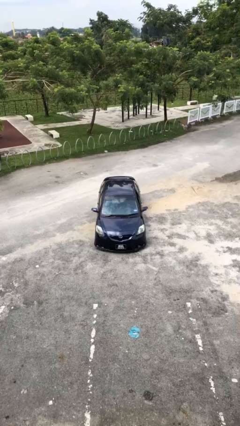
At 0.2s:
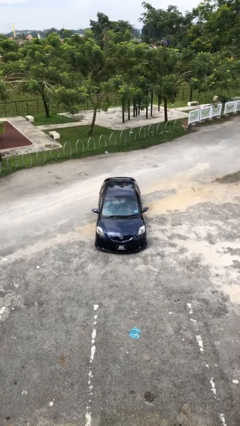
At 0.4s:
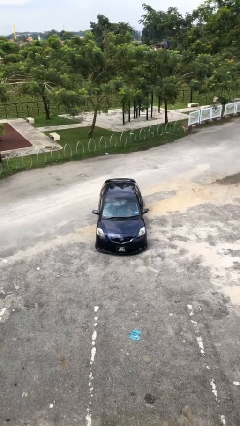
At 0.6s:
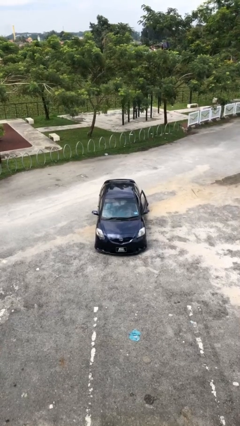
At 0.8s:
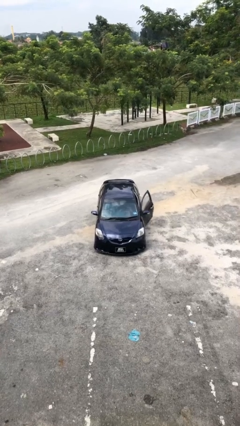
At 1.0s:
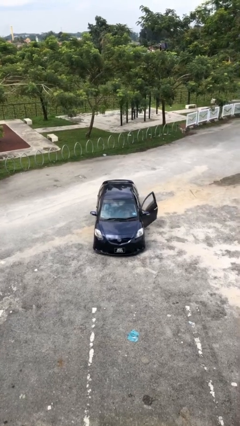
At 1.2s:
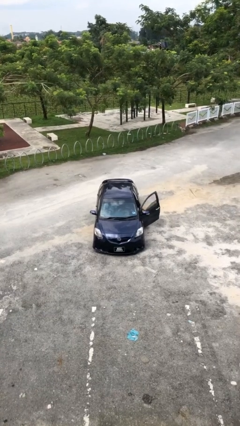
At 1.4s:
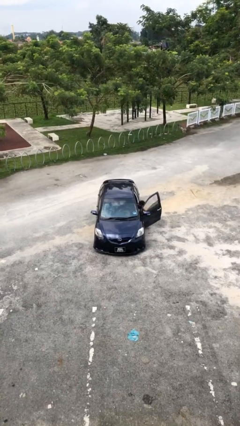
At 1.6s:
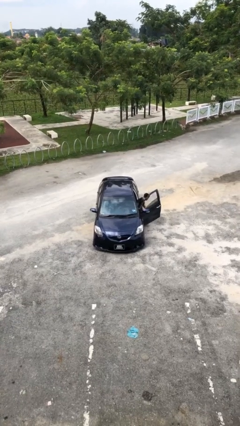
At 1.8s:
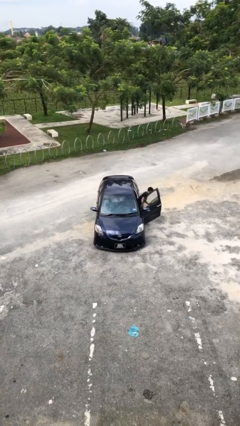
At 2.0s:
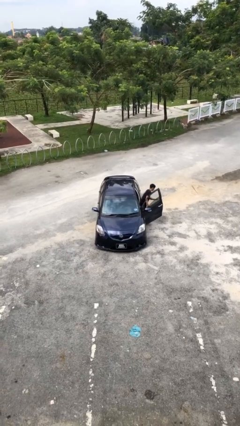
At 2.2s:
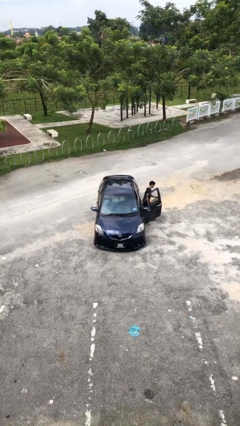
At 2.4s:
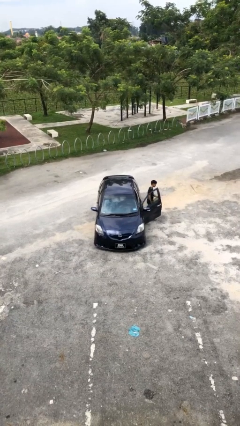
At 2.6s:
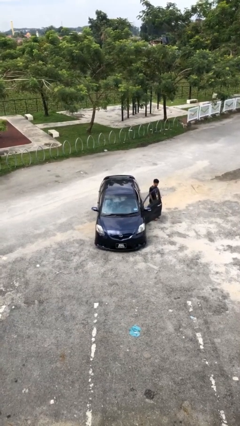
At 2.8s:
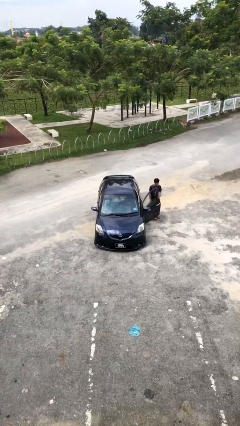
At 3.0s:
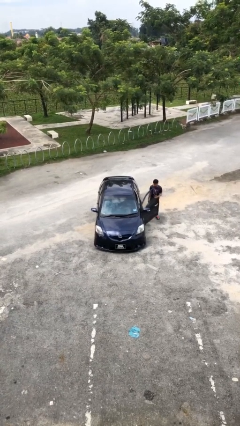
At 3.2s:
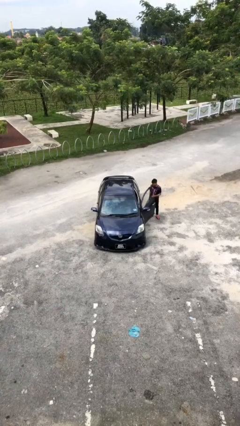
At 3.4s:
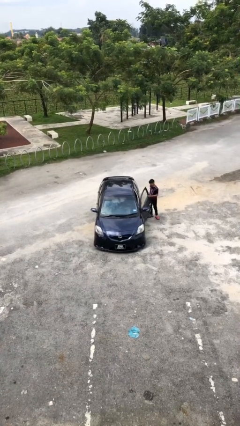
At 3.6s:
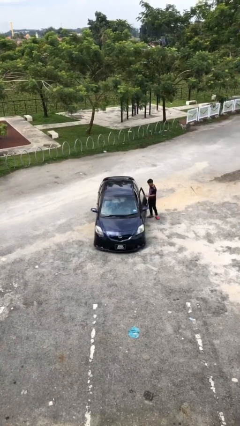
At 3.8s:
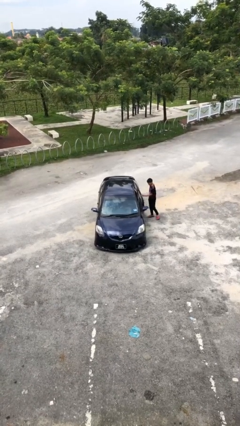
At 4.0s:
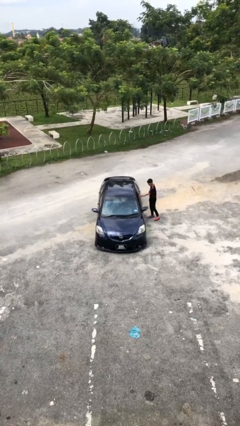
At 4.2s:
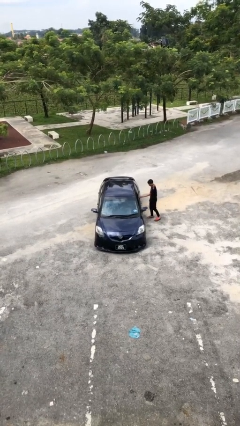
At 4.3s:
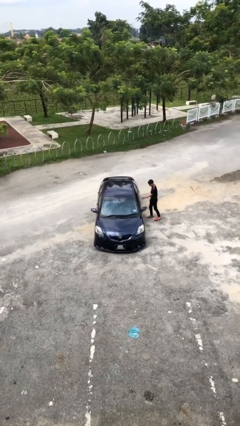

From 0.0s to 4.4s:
car drops off person

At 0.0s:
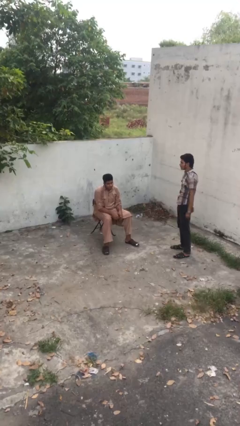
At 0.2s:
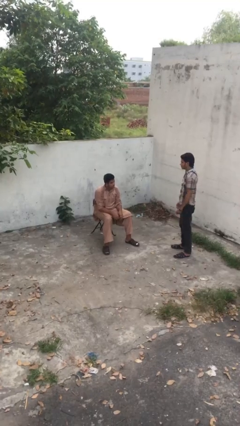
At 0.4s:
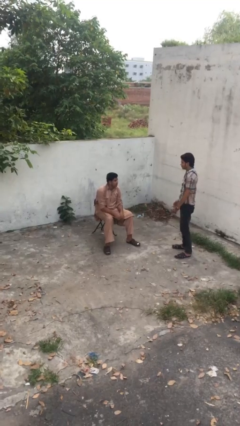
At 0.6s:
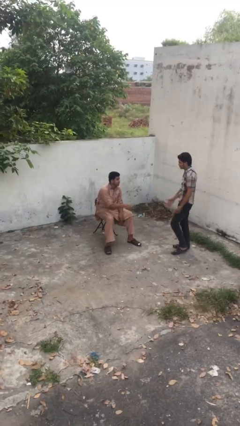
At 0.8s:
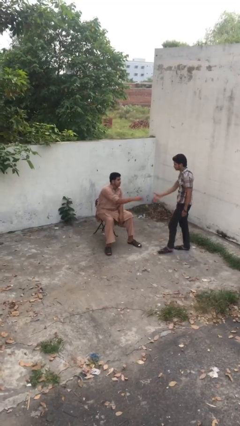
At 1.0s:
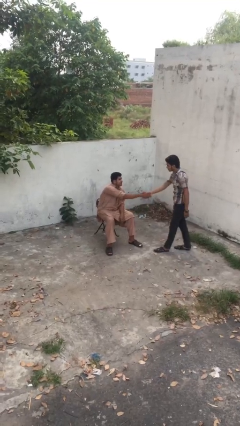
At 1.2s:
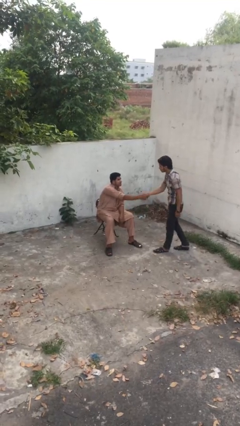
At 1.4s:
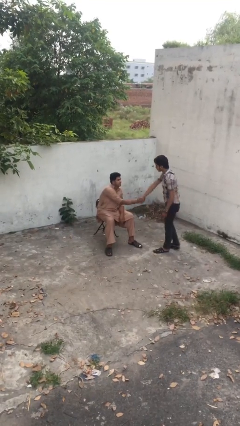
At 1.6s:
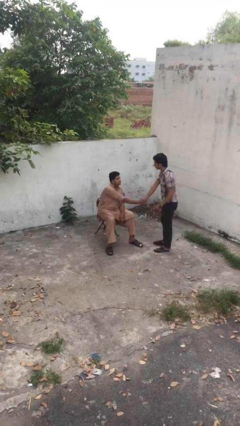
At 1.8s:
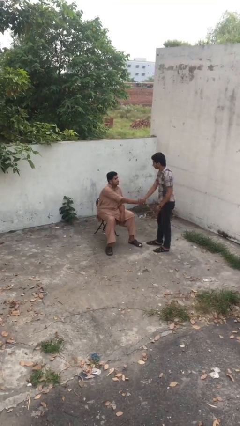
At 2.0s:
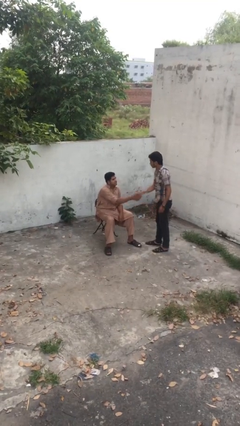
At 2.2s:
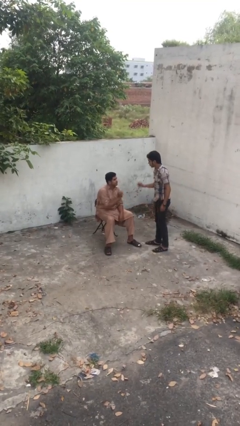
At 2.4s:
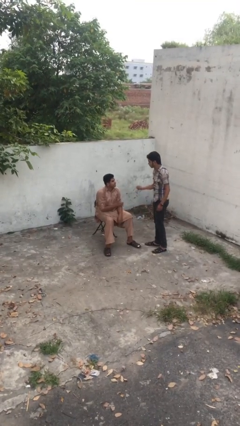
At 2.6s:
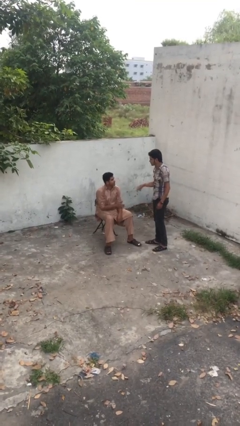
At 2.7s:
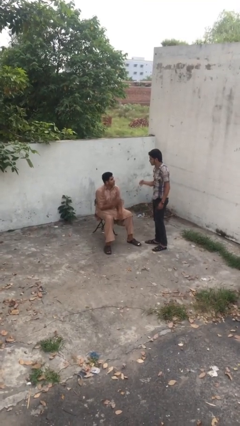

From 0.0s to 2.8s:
person shakes hand

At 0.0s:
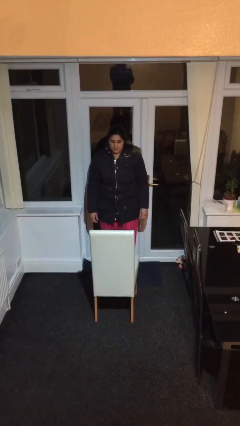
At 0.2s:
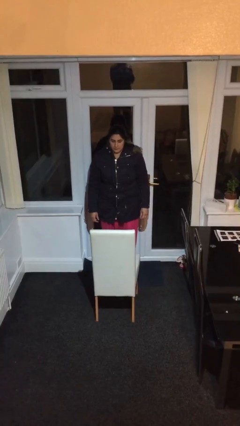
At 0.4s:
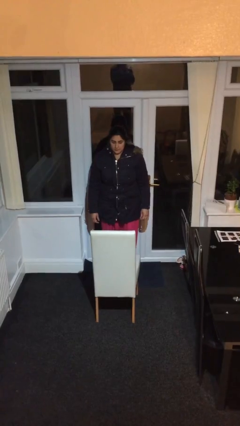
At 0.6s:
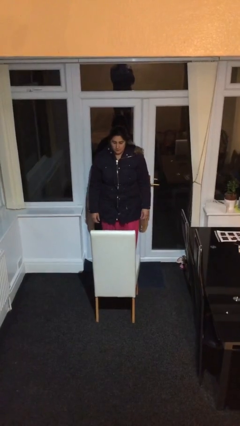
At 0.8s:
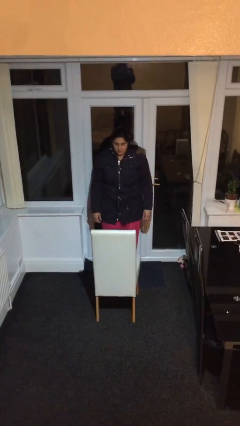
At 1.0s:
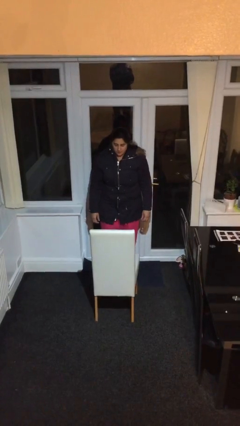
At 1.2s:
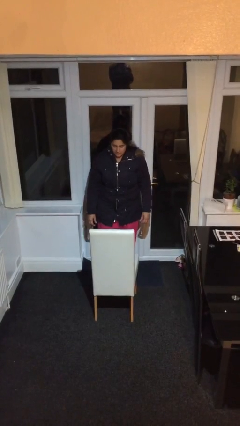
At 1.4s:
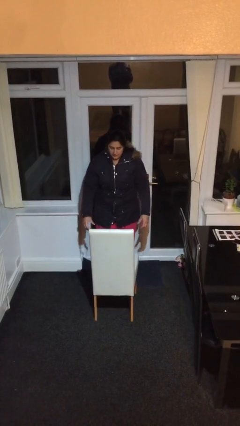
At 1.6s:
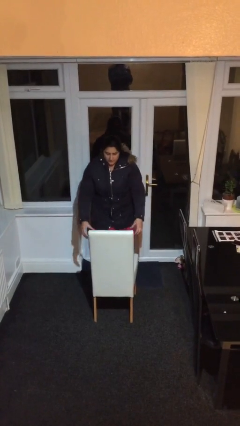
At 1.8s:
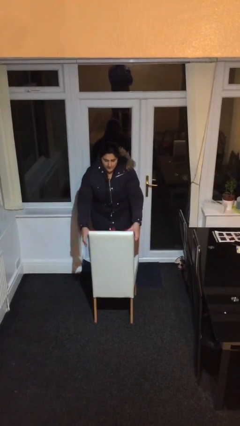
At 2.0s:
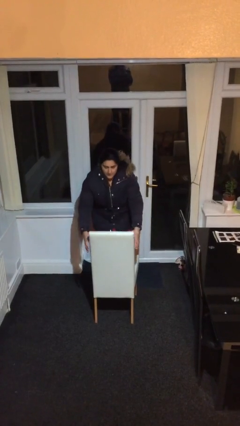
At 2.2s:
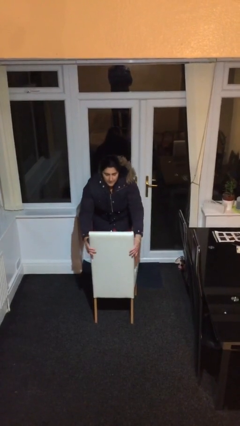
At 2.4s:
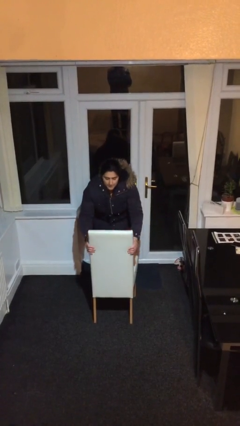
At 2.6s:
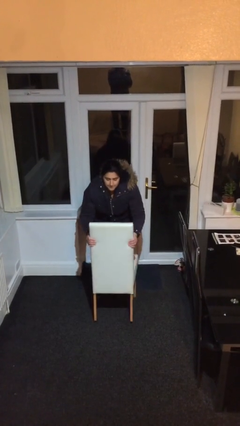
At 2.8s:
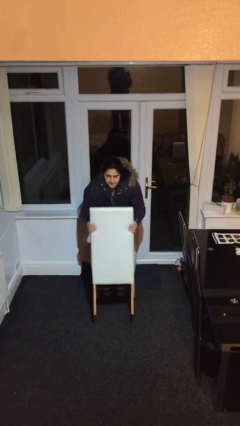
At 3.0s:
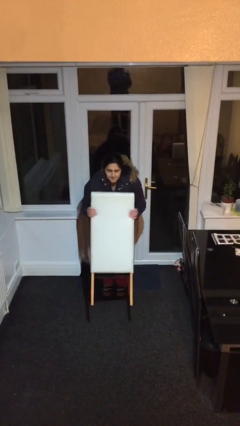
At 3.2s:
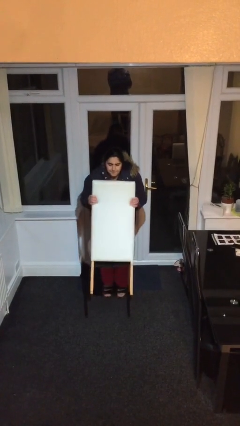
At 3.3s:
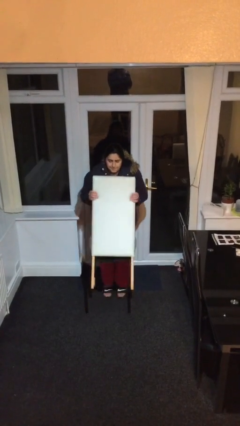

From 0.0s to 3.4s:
person picks up object from floor

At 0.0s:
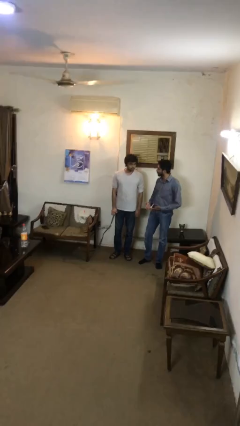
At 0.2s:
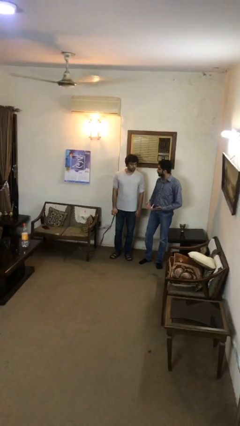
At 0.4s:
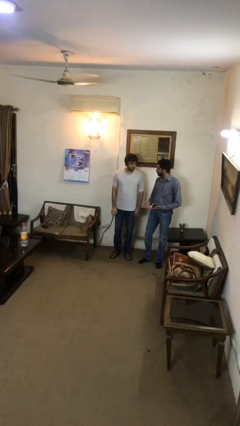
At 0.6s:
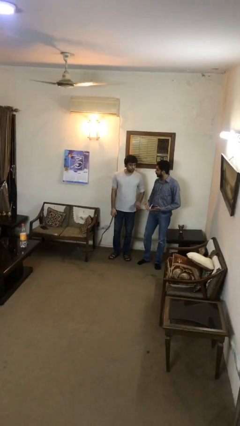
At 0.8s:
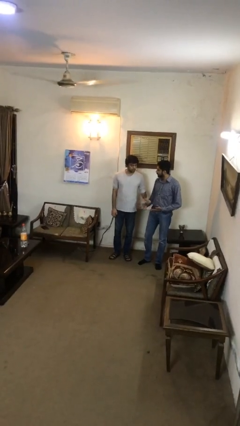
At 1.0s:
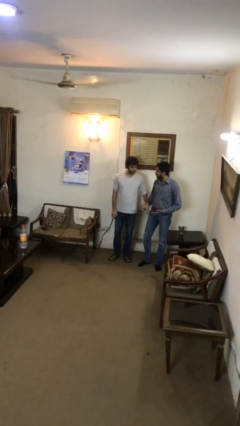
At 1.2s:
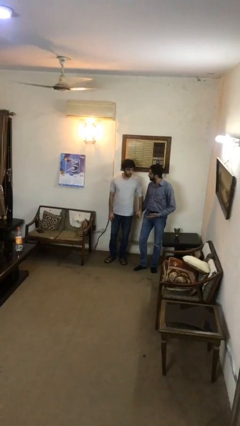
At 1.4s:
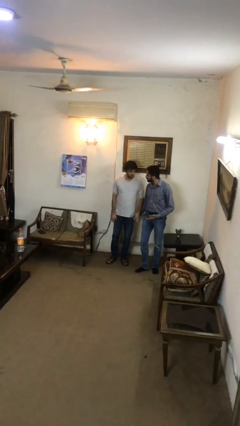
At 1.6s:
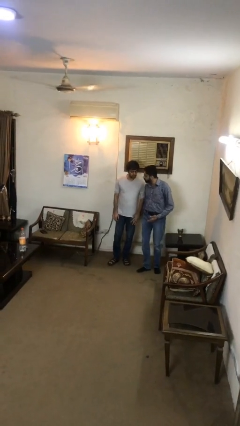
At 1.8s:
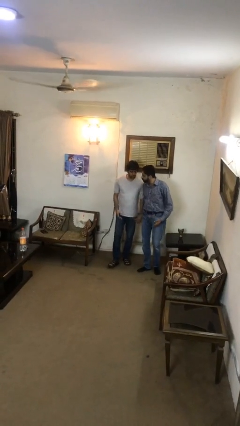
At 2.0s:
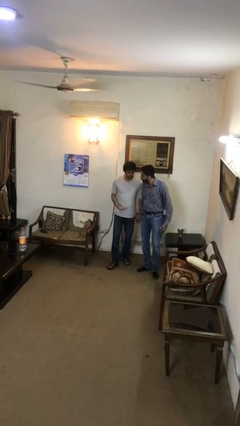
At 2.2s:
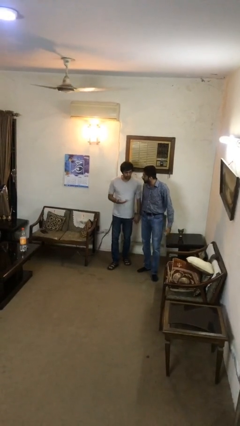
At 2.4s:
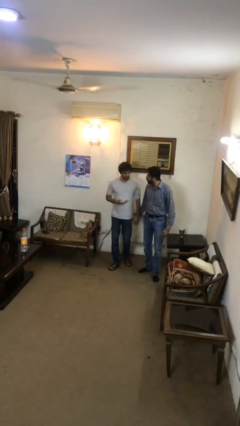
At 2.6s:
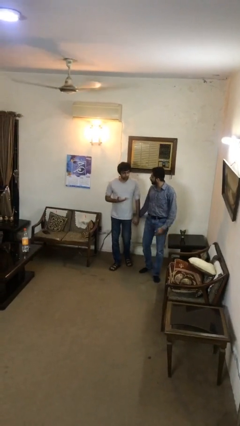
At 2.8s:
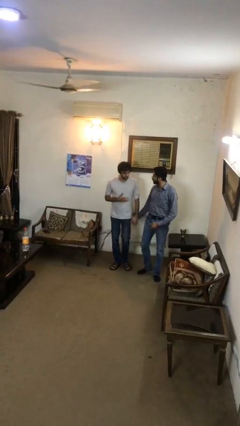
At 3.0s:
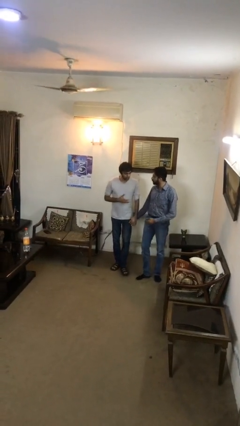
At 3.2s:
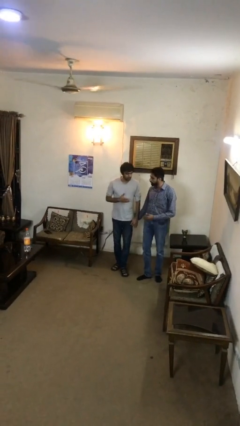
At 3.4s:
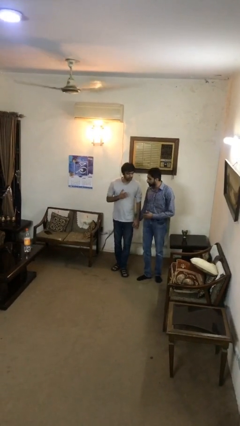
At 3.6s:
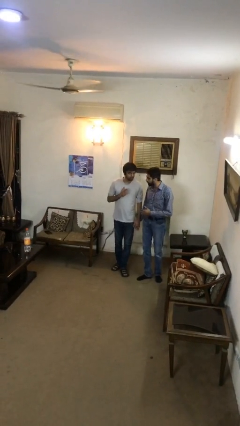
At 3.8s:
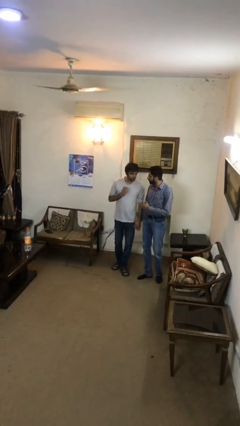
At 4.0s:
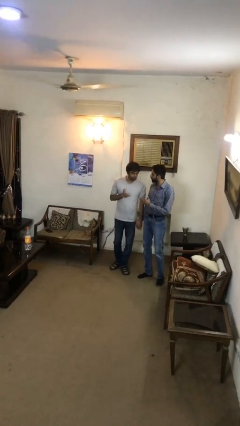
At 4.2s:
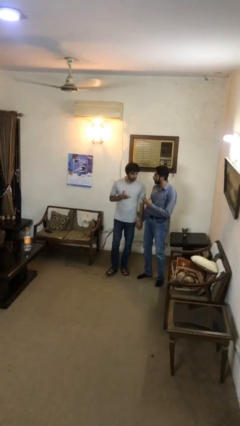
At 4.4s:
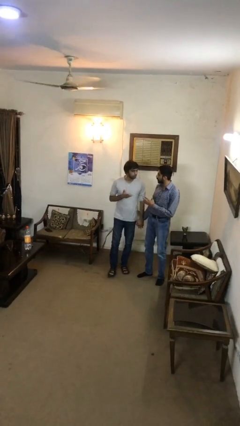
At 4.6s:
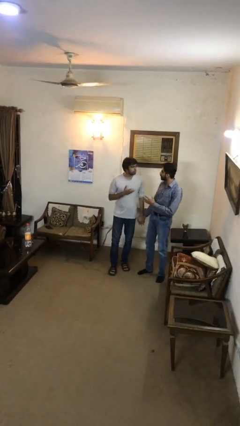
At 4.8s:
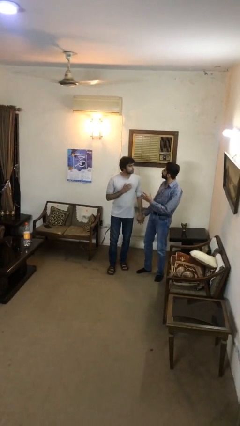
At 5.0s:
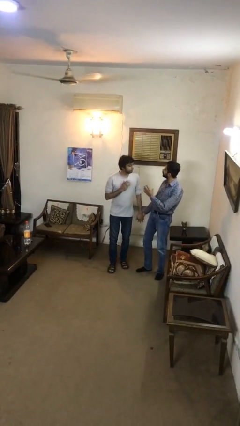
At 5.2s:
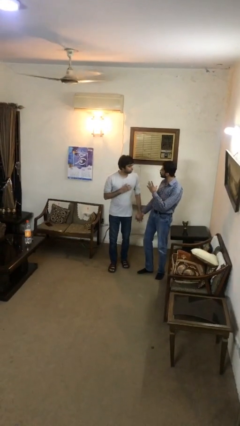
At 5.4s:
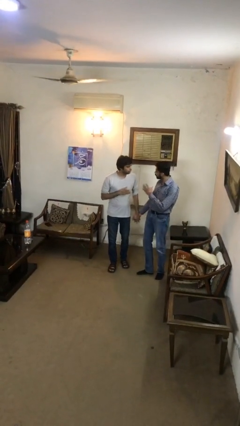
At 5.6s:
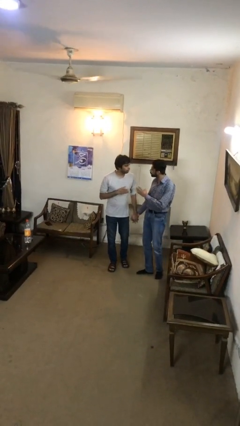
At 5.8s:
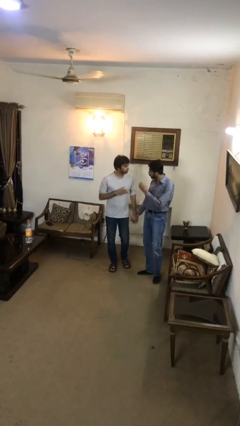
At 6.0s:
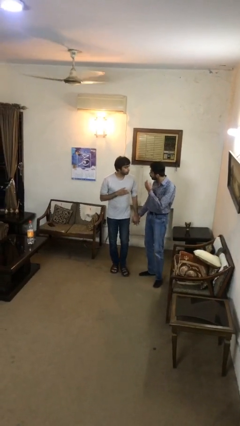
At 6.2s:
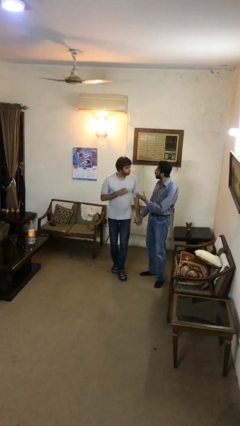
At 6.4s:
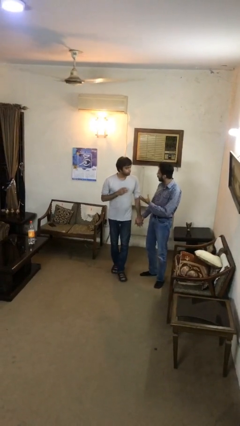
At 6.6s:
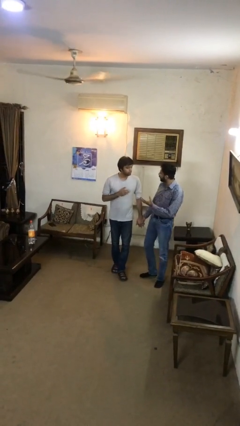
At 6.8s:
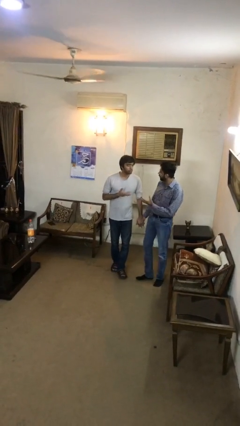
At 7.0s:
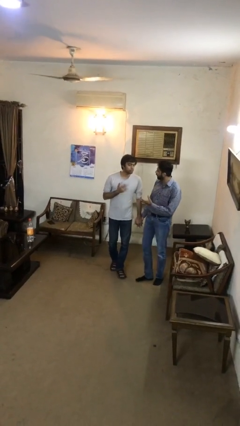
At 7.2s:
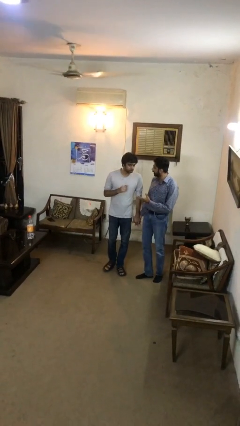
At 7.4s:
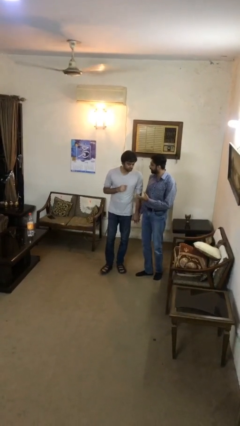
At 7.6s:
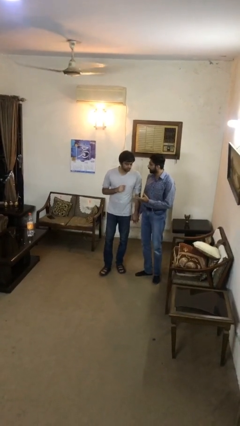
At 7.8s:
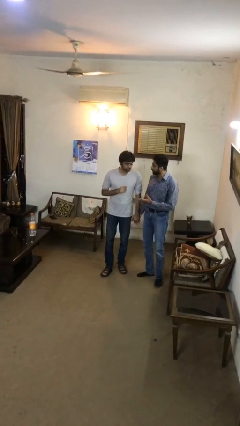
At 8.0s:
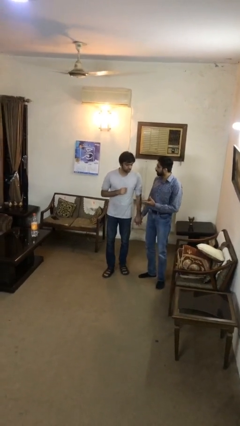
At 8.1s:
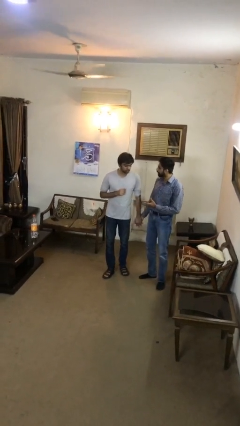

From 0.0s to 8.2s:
person holds hand
